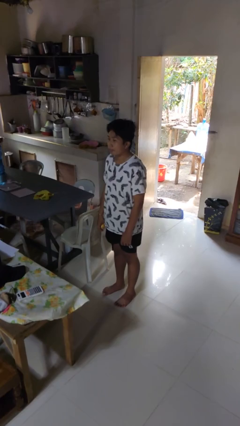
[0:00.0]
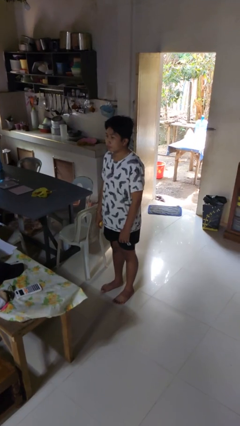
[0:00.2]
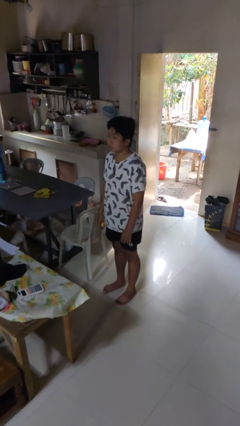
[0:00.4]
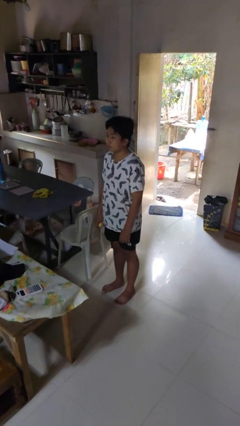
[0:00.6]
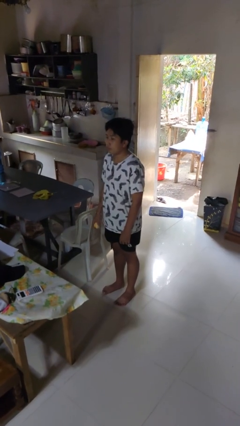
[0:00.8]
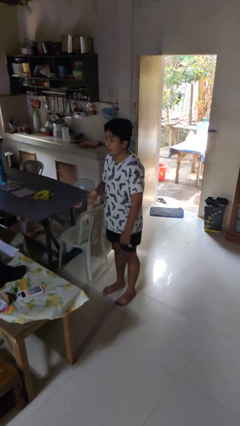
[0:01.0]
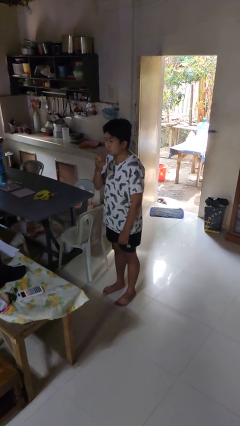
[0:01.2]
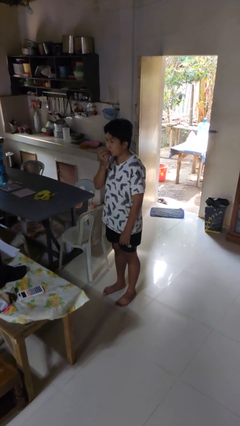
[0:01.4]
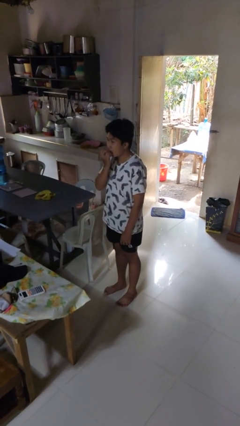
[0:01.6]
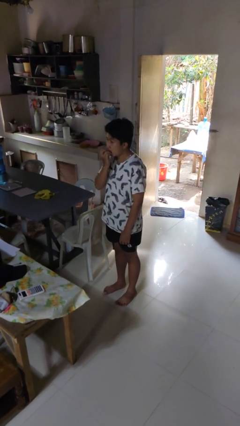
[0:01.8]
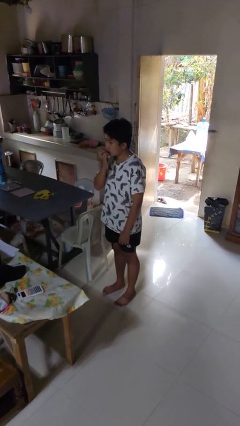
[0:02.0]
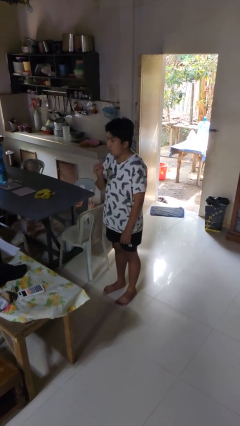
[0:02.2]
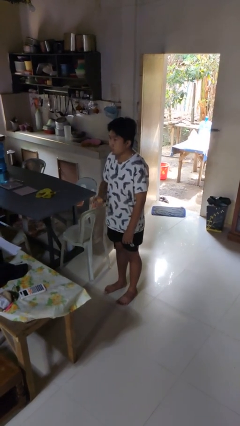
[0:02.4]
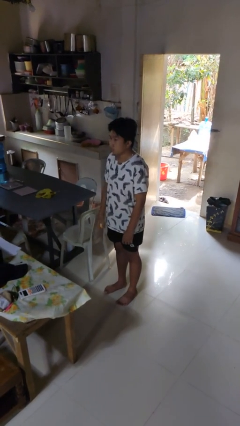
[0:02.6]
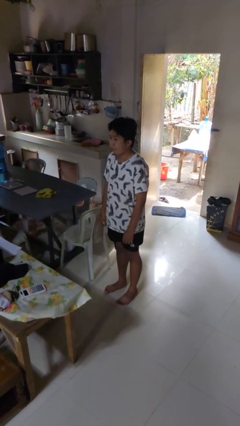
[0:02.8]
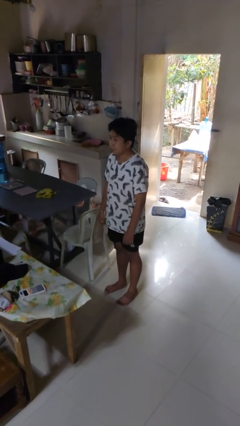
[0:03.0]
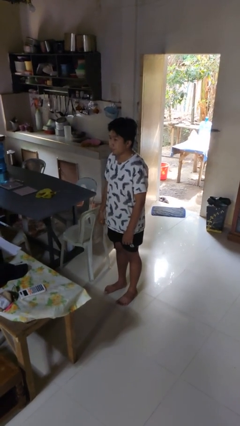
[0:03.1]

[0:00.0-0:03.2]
person eats apple

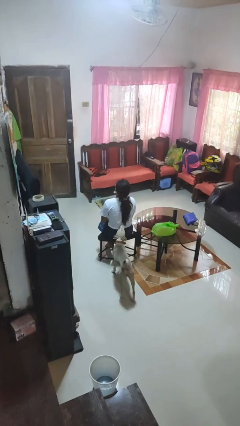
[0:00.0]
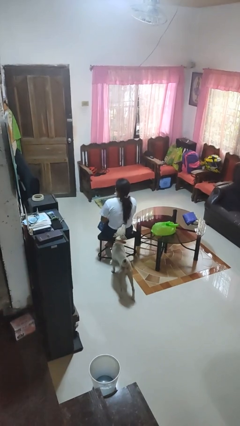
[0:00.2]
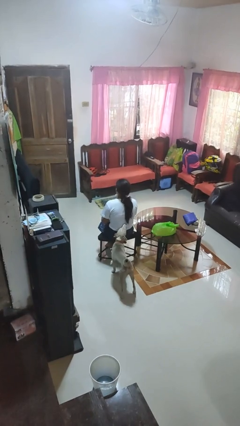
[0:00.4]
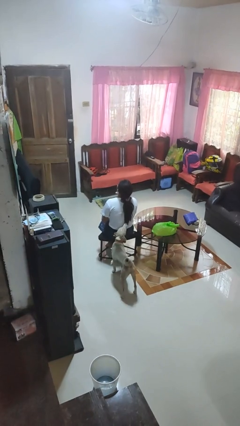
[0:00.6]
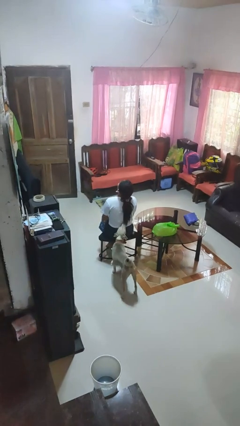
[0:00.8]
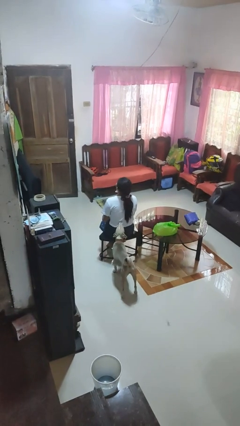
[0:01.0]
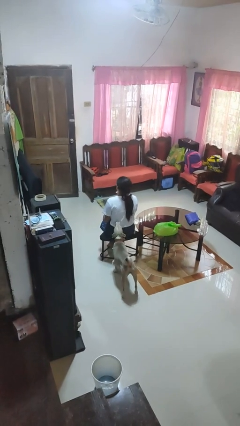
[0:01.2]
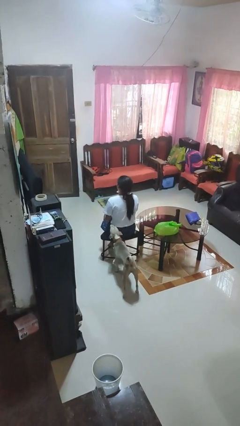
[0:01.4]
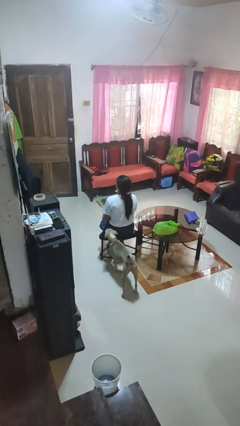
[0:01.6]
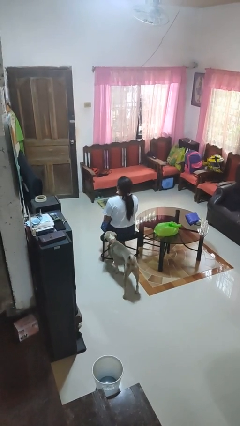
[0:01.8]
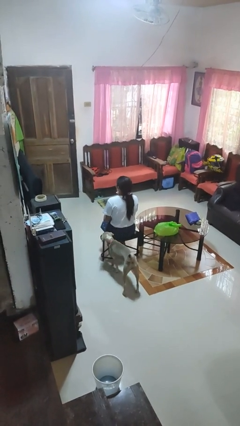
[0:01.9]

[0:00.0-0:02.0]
person nods head

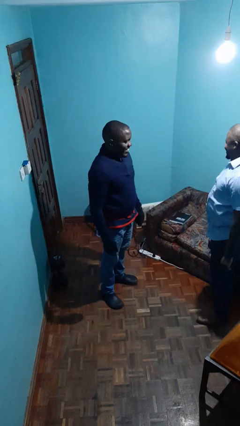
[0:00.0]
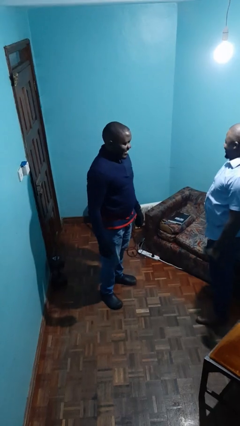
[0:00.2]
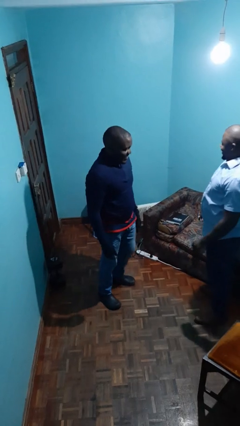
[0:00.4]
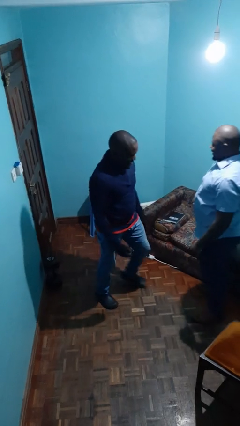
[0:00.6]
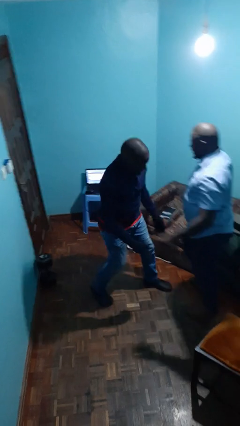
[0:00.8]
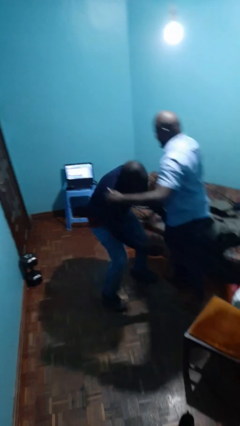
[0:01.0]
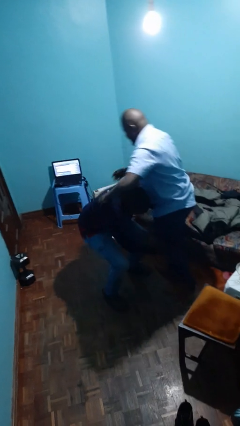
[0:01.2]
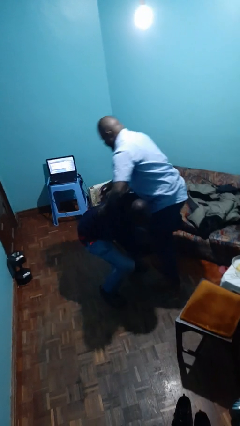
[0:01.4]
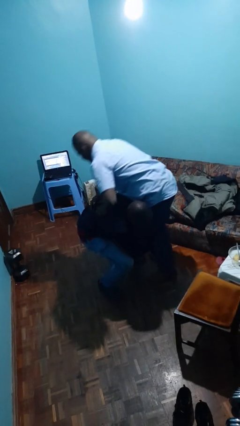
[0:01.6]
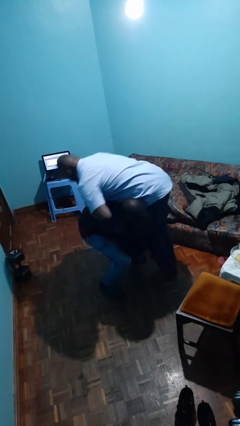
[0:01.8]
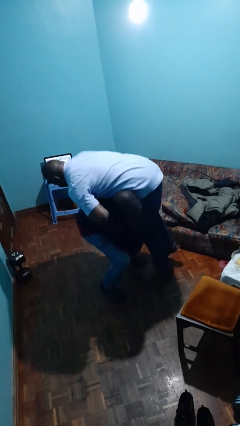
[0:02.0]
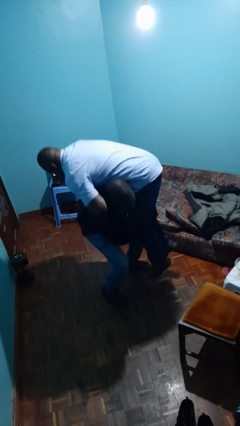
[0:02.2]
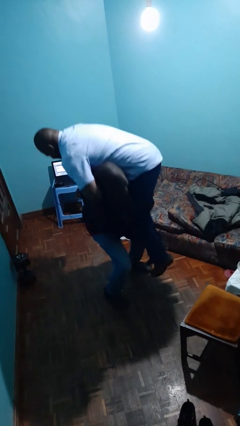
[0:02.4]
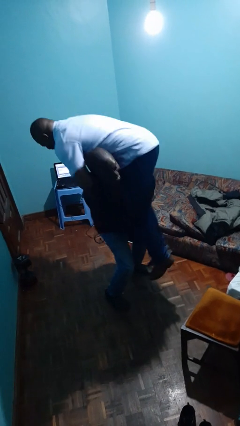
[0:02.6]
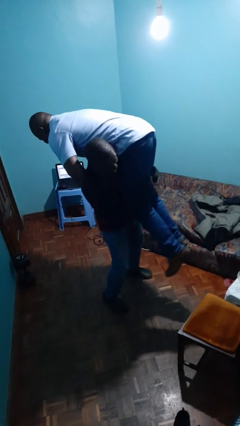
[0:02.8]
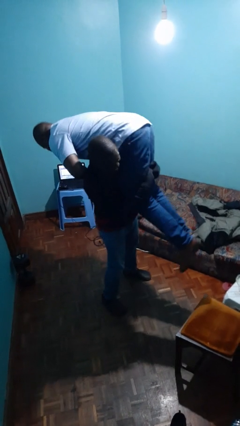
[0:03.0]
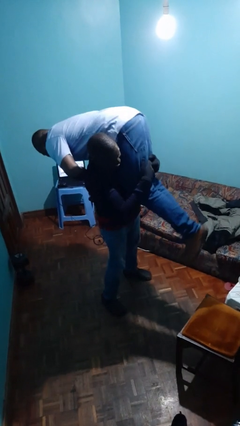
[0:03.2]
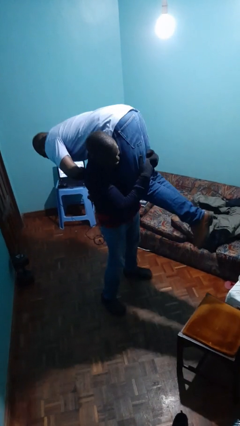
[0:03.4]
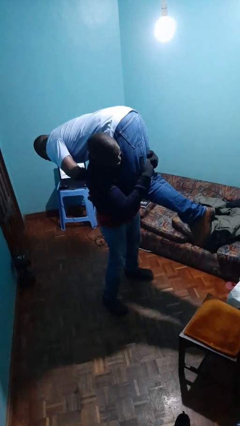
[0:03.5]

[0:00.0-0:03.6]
person carries person over shoulder

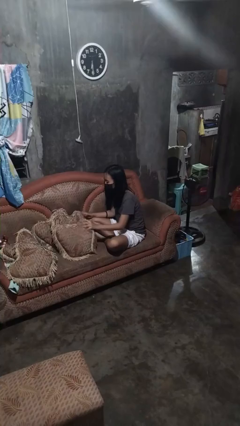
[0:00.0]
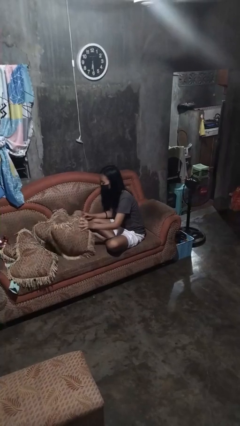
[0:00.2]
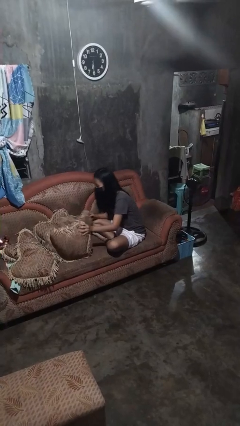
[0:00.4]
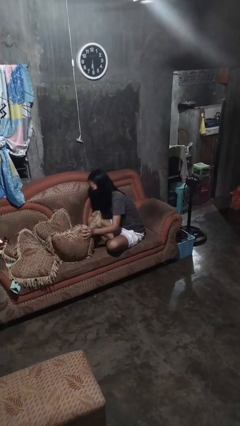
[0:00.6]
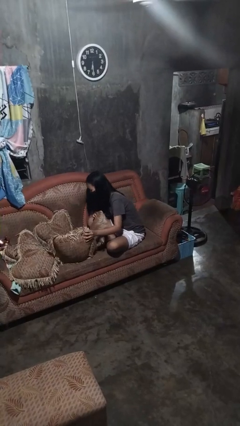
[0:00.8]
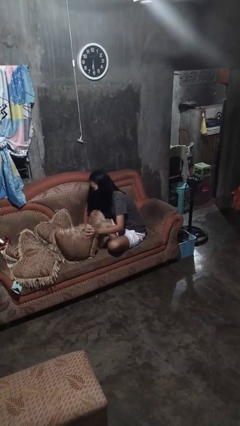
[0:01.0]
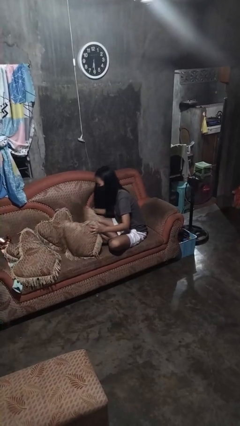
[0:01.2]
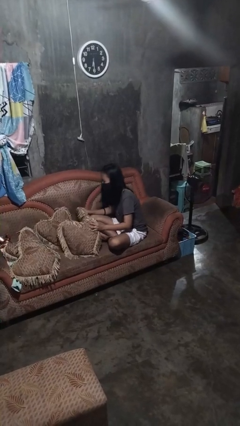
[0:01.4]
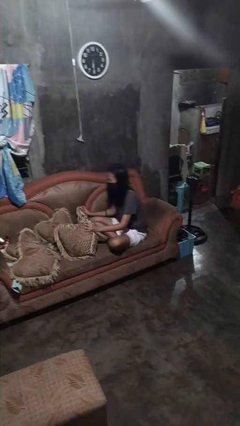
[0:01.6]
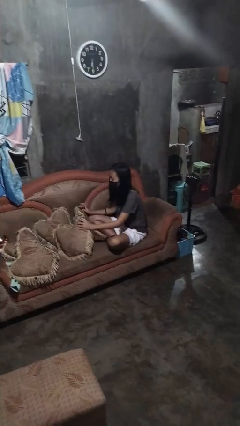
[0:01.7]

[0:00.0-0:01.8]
person searches in couch

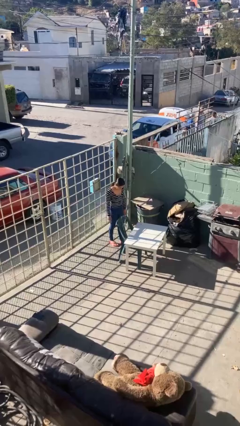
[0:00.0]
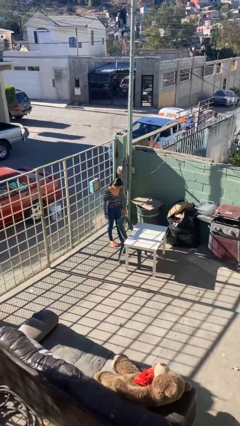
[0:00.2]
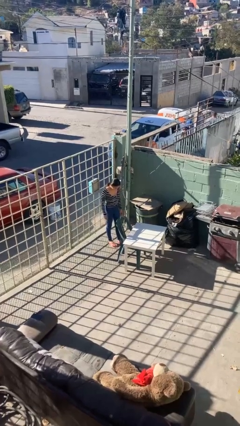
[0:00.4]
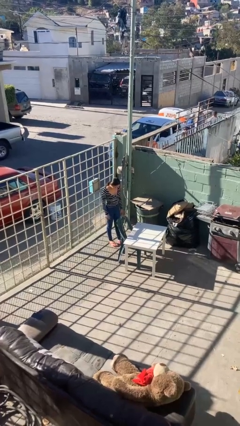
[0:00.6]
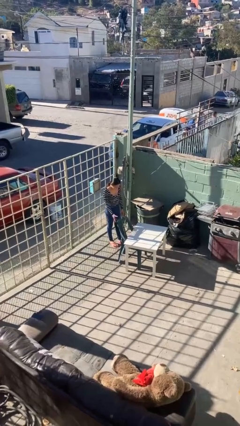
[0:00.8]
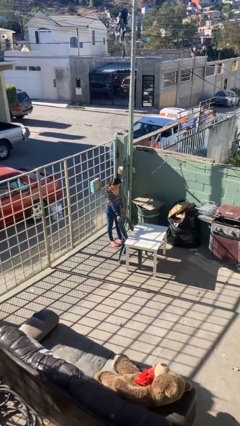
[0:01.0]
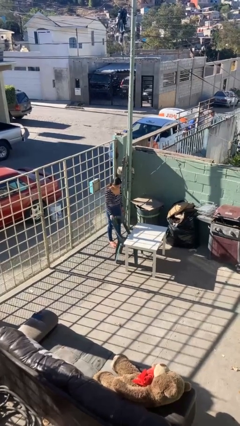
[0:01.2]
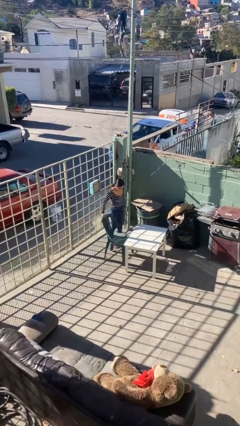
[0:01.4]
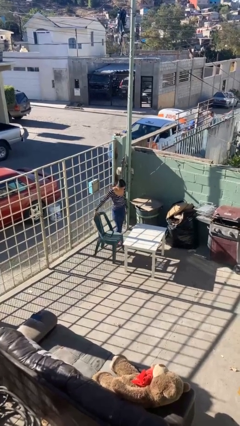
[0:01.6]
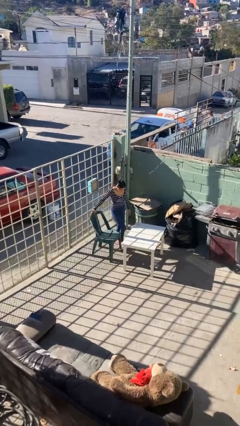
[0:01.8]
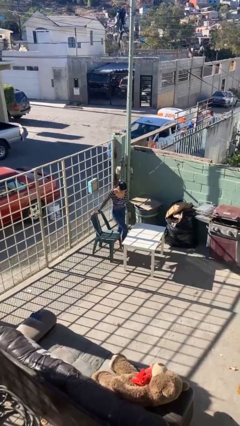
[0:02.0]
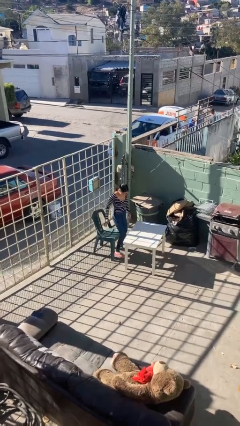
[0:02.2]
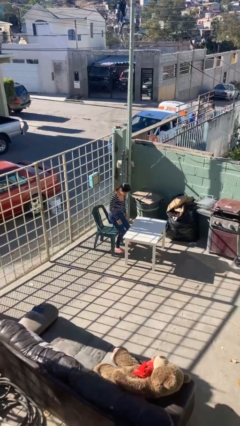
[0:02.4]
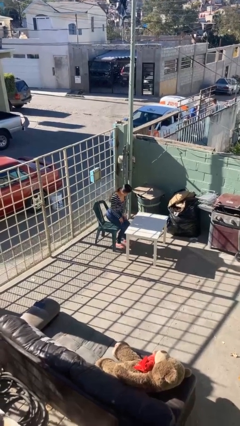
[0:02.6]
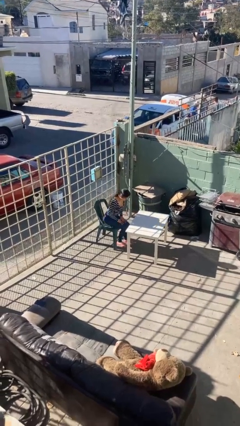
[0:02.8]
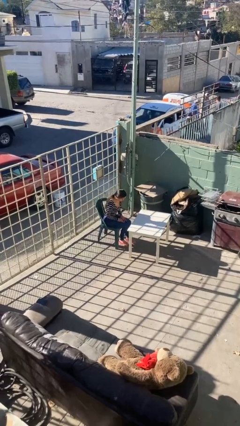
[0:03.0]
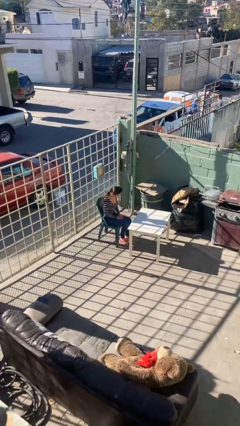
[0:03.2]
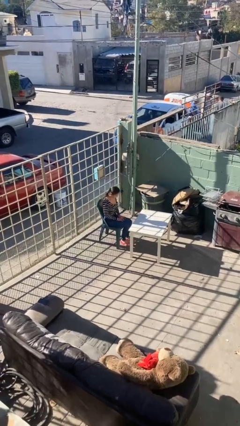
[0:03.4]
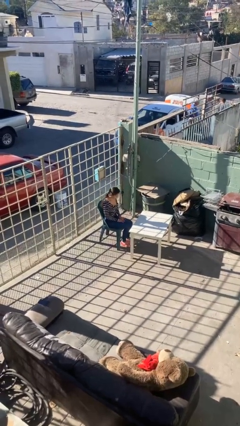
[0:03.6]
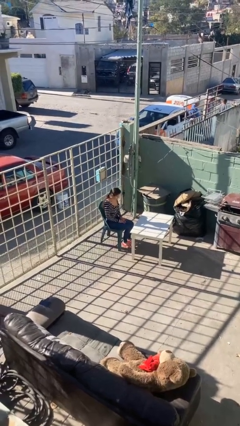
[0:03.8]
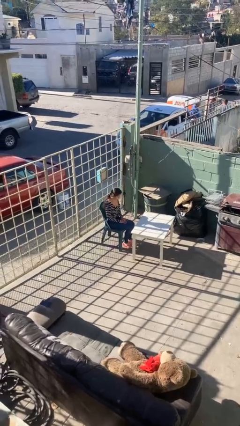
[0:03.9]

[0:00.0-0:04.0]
person sits down

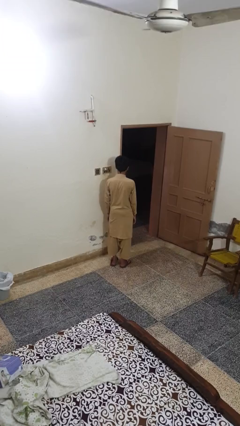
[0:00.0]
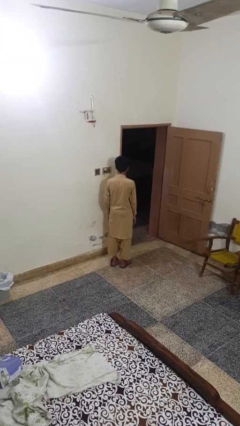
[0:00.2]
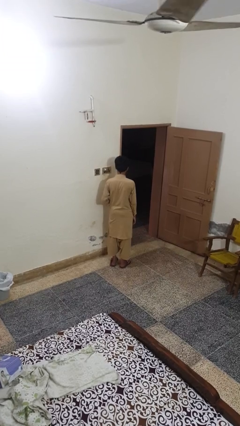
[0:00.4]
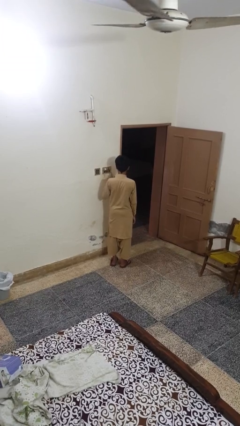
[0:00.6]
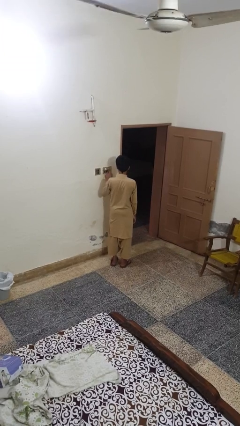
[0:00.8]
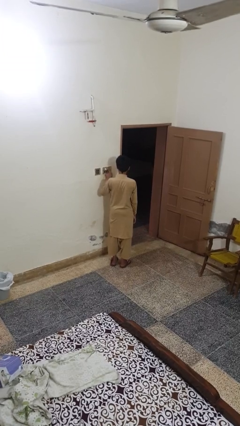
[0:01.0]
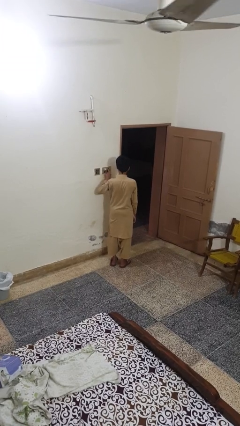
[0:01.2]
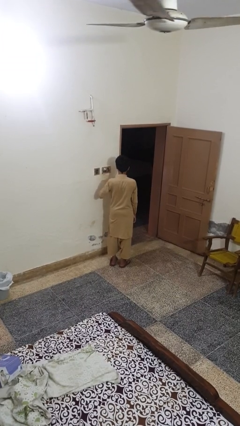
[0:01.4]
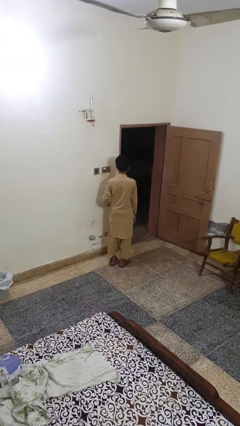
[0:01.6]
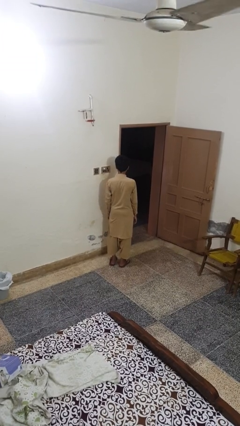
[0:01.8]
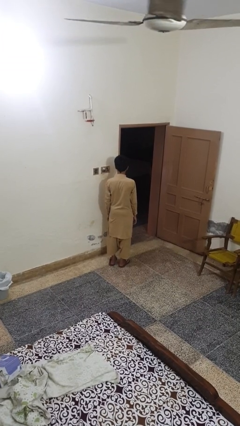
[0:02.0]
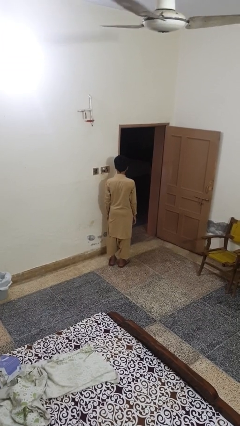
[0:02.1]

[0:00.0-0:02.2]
person turns on fan

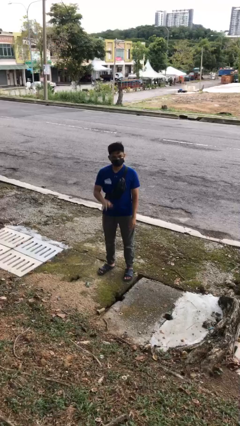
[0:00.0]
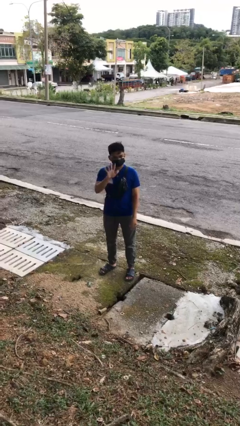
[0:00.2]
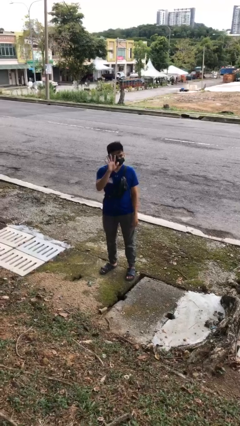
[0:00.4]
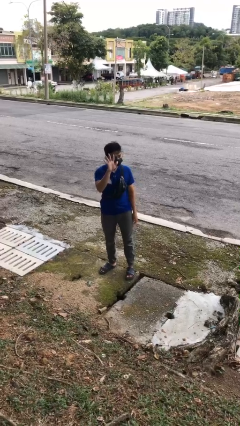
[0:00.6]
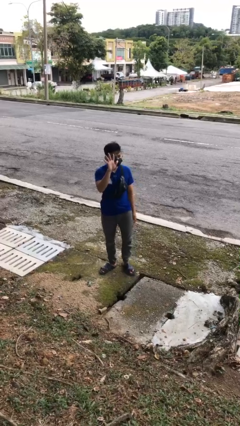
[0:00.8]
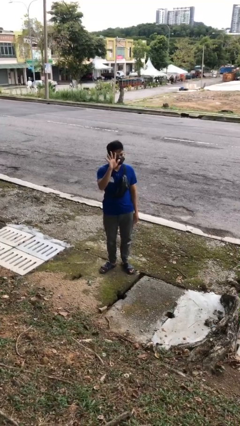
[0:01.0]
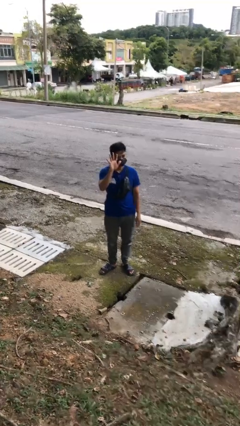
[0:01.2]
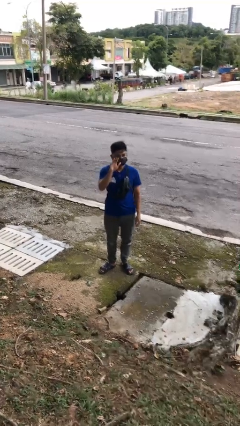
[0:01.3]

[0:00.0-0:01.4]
person gestures number five
